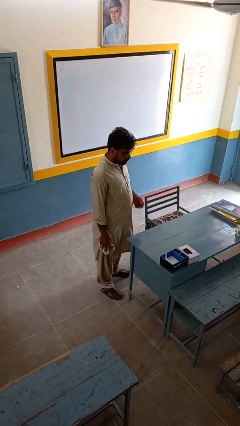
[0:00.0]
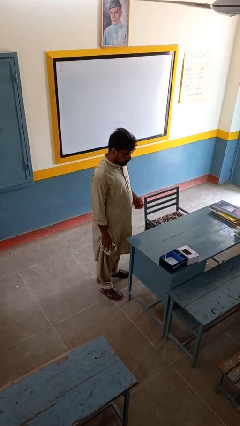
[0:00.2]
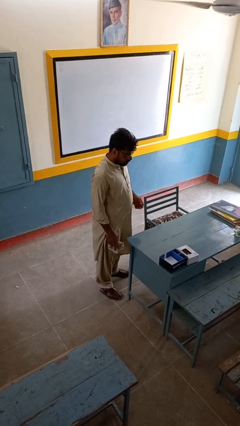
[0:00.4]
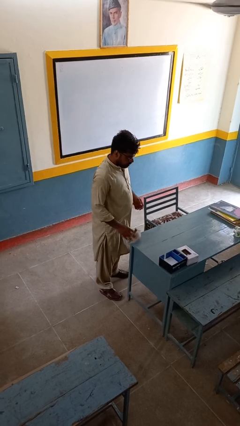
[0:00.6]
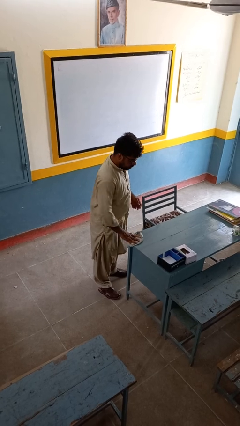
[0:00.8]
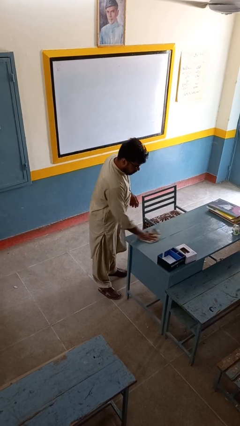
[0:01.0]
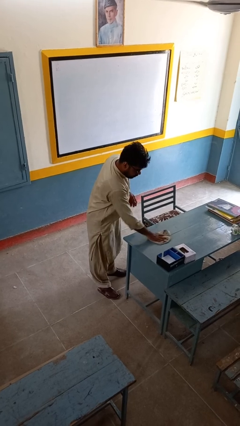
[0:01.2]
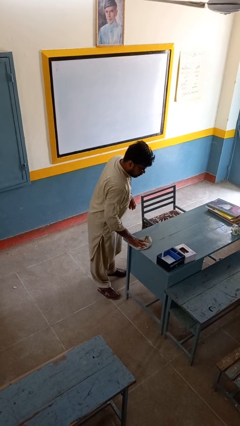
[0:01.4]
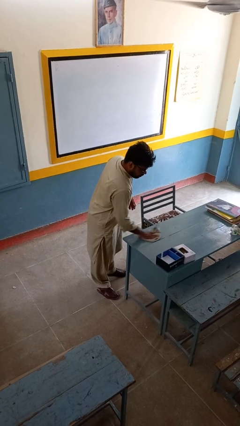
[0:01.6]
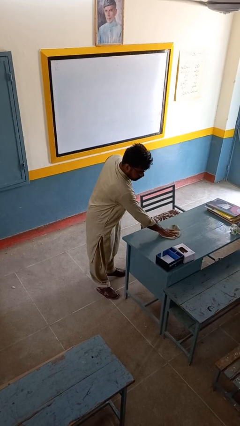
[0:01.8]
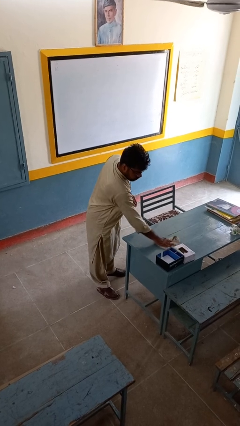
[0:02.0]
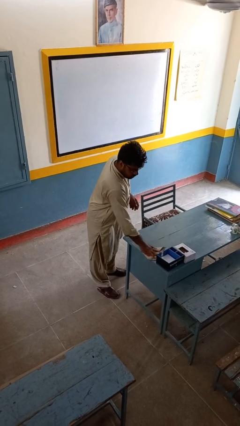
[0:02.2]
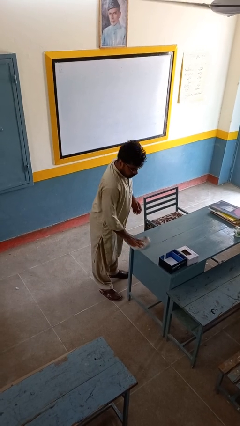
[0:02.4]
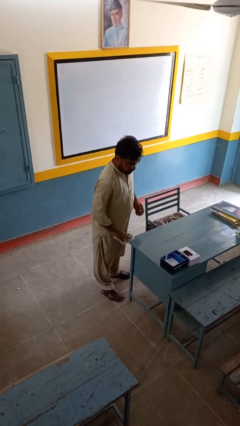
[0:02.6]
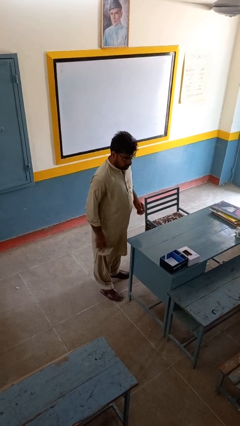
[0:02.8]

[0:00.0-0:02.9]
person cleans table with rag

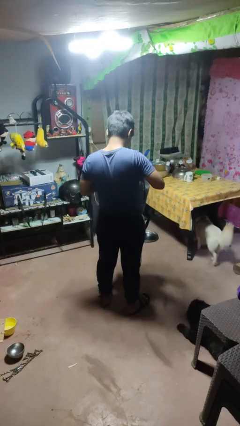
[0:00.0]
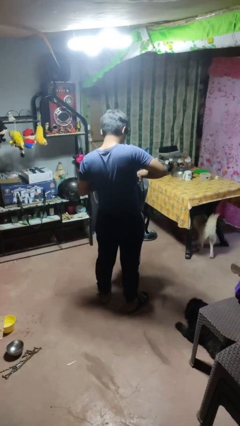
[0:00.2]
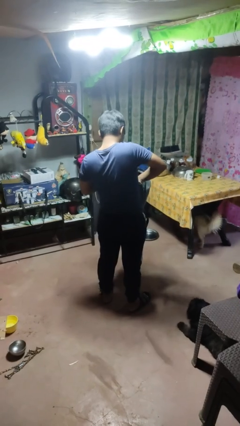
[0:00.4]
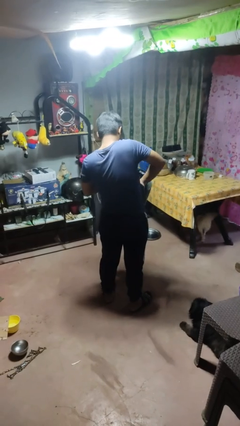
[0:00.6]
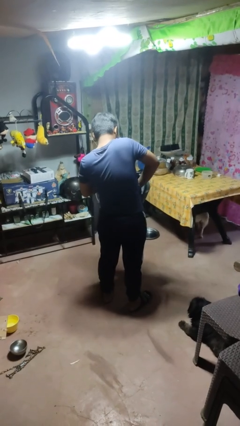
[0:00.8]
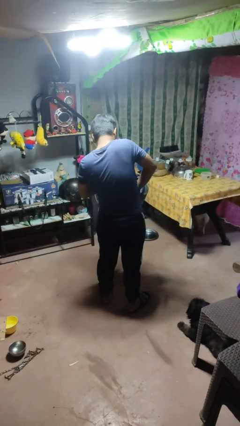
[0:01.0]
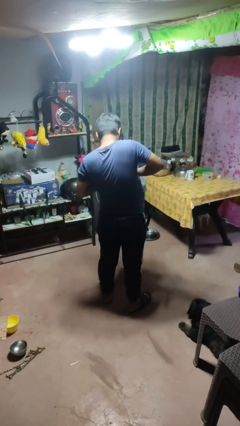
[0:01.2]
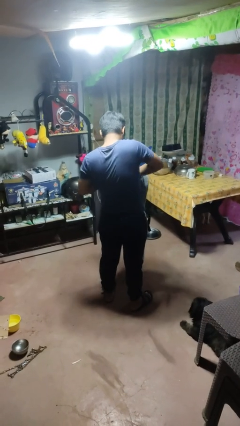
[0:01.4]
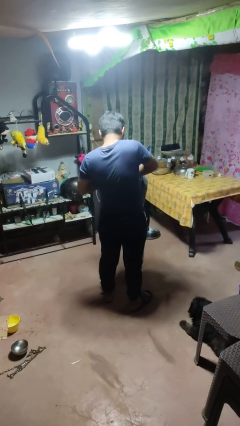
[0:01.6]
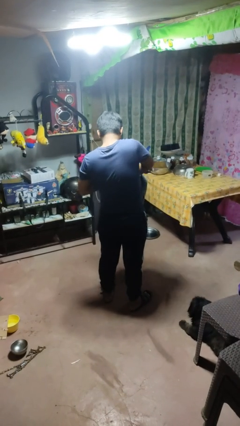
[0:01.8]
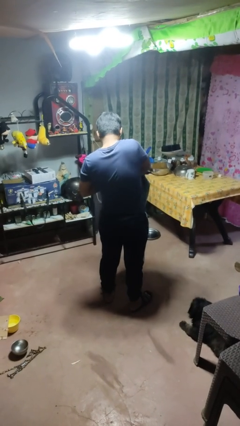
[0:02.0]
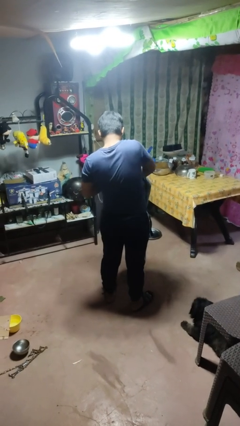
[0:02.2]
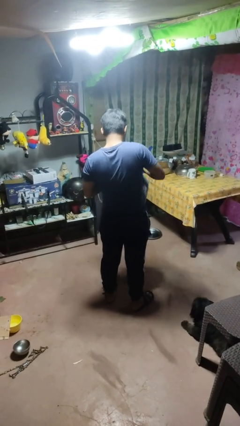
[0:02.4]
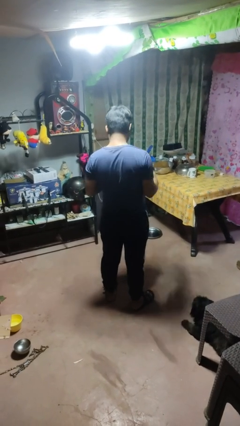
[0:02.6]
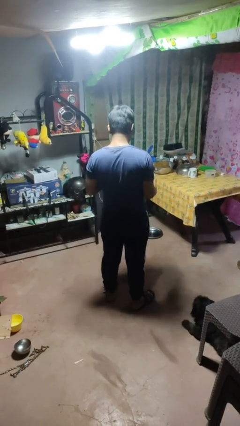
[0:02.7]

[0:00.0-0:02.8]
person searches in bag

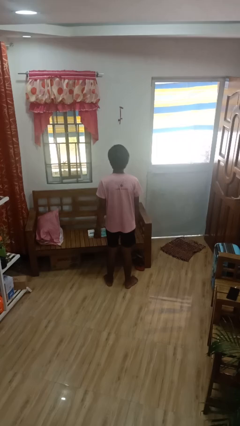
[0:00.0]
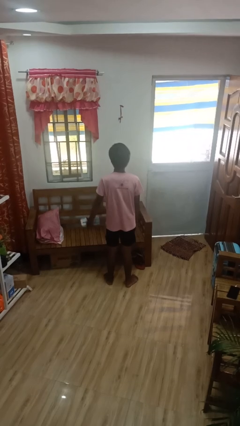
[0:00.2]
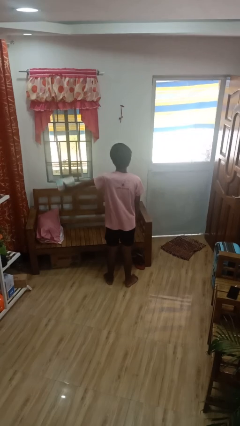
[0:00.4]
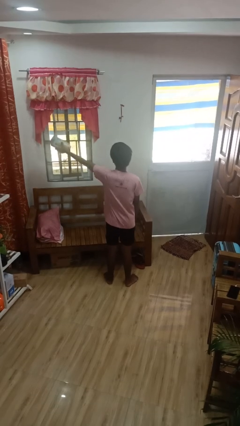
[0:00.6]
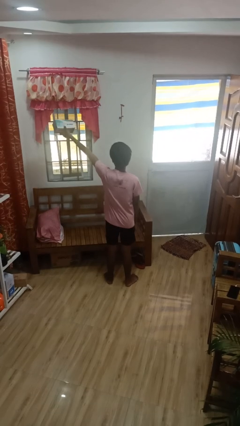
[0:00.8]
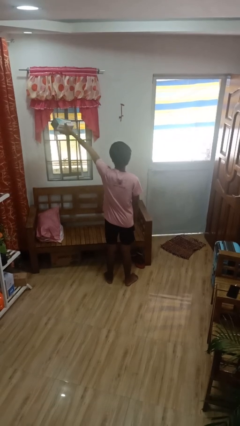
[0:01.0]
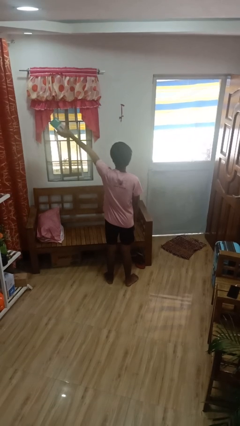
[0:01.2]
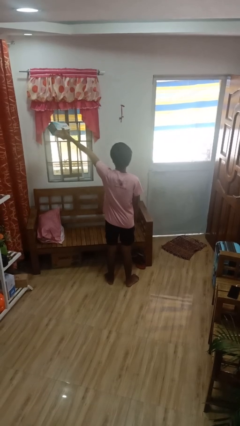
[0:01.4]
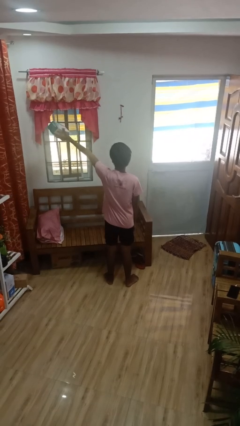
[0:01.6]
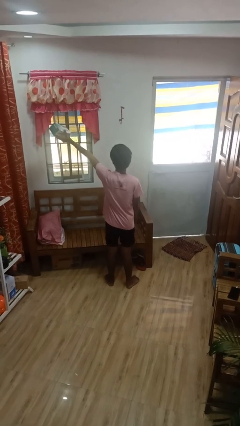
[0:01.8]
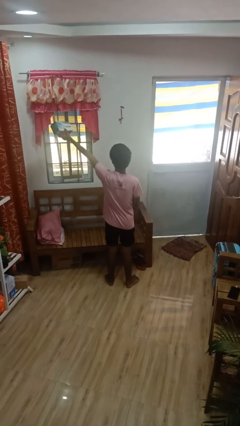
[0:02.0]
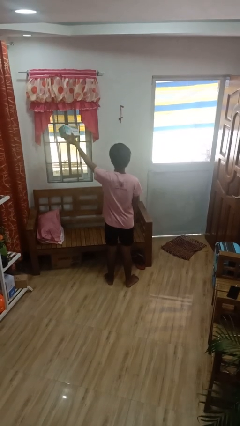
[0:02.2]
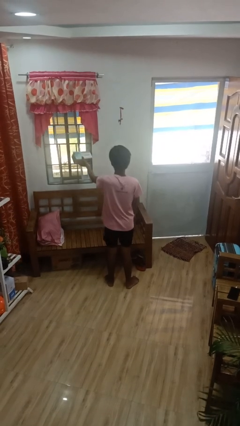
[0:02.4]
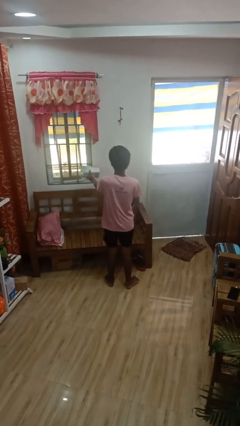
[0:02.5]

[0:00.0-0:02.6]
person holds object above head

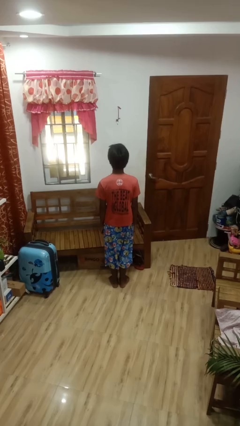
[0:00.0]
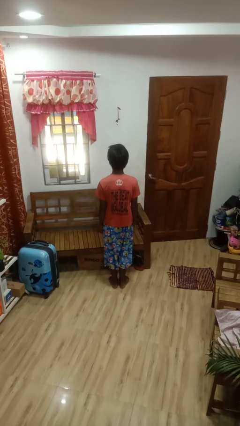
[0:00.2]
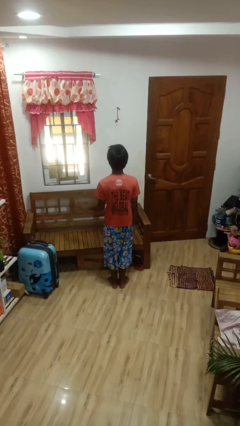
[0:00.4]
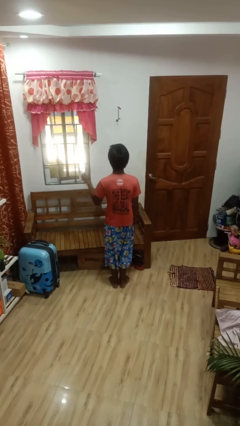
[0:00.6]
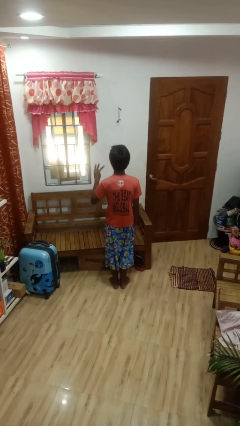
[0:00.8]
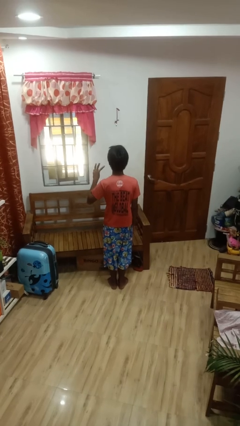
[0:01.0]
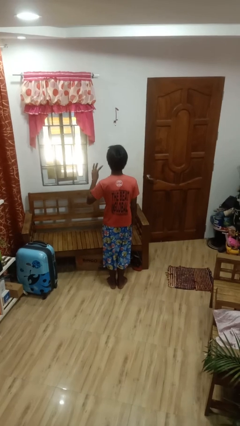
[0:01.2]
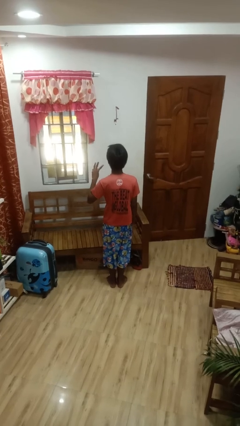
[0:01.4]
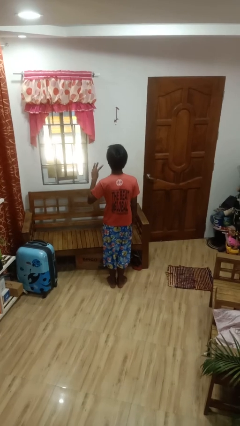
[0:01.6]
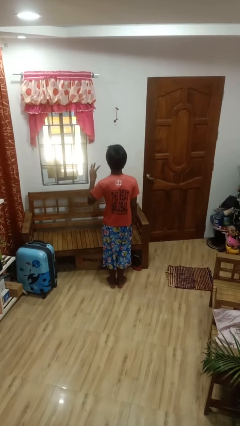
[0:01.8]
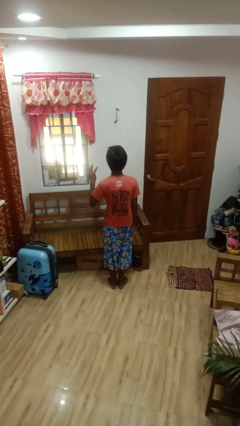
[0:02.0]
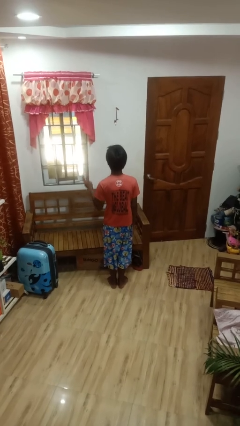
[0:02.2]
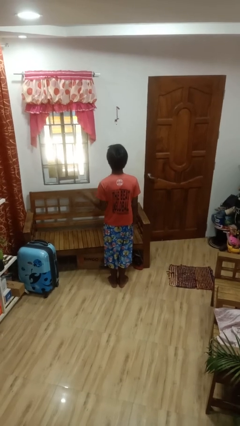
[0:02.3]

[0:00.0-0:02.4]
person gestures number three

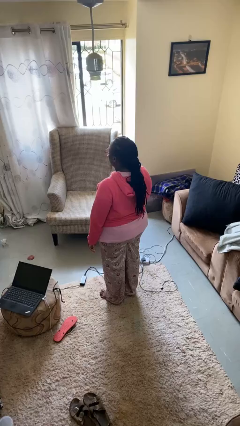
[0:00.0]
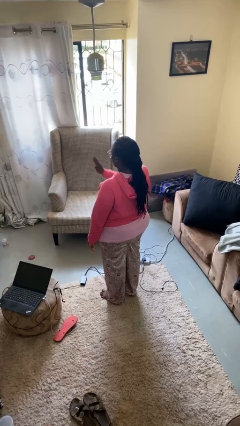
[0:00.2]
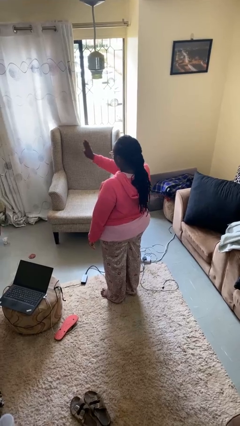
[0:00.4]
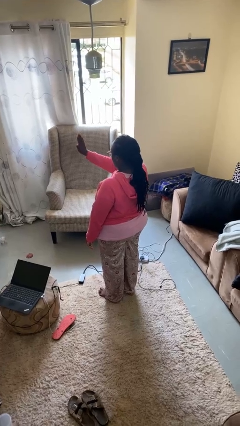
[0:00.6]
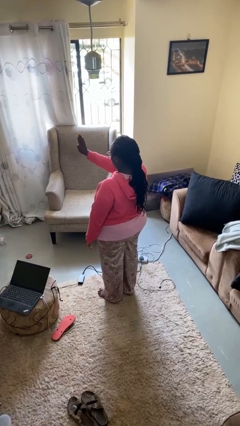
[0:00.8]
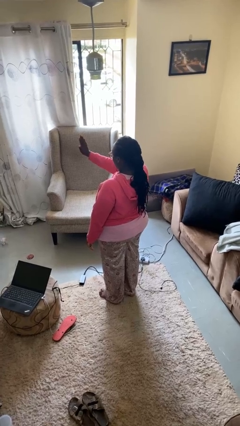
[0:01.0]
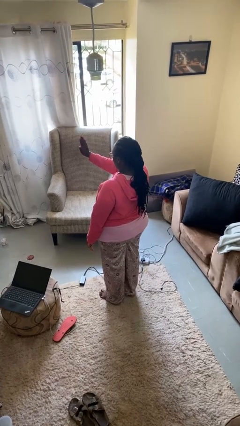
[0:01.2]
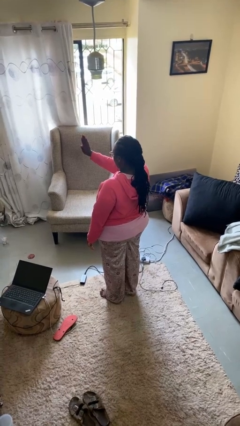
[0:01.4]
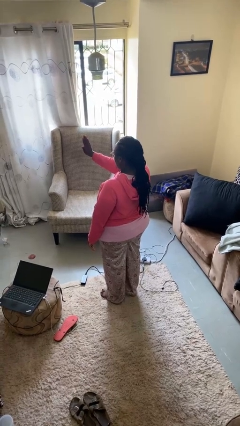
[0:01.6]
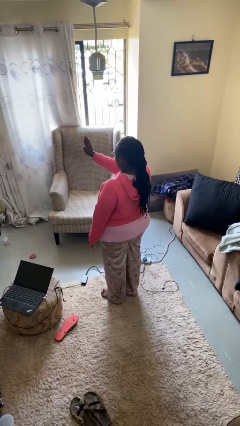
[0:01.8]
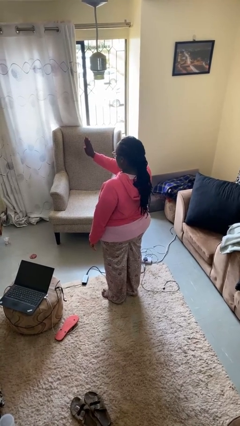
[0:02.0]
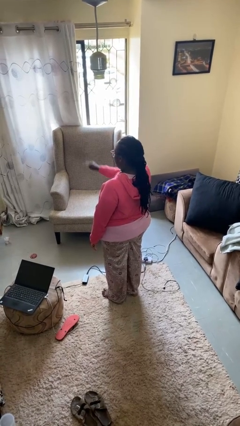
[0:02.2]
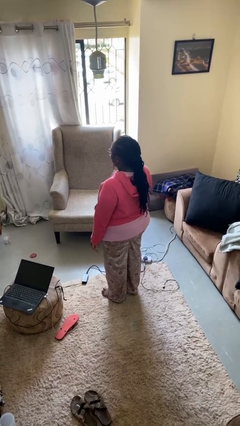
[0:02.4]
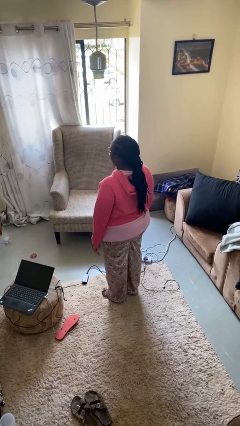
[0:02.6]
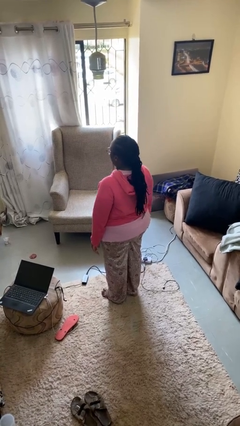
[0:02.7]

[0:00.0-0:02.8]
person gestures stop

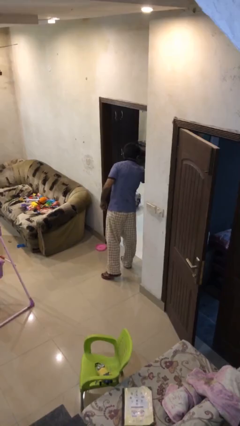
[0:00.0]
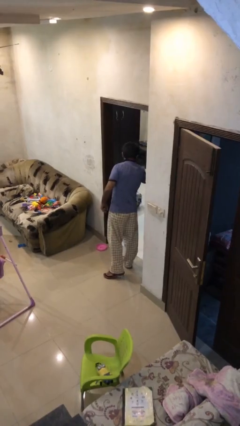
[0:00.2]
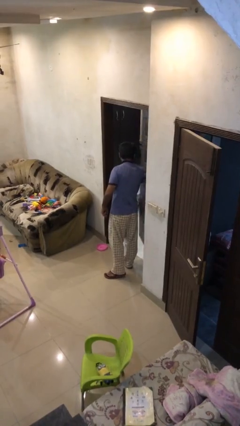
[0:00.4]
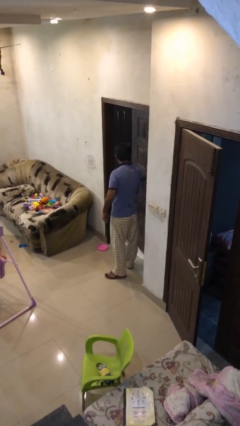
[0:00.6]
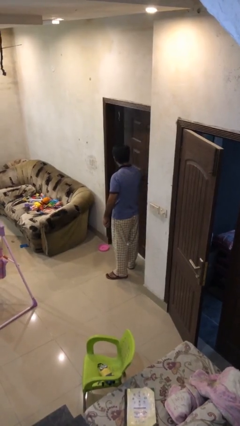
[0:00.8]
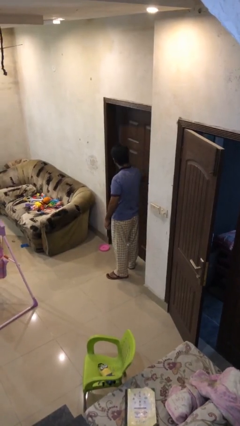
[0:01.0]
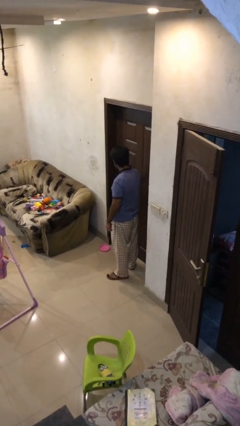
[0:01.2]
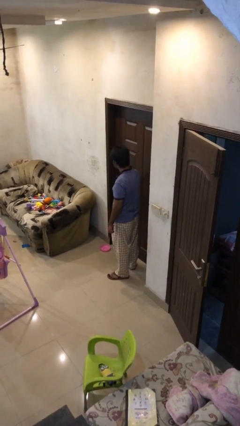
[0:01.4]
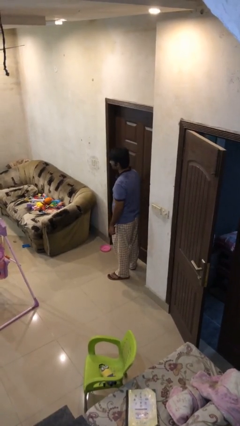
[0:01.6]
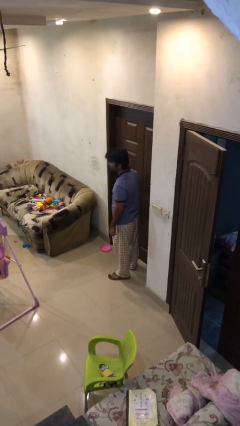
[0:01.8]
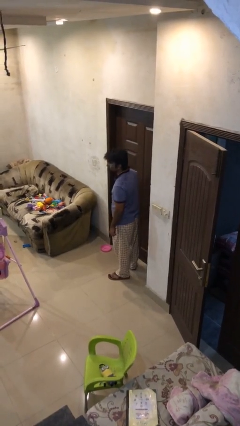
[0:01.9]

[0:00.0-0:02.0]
person closes facility door

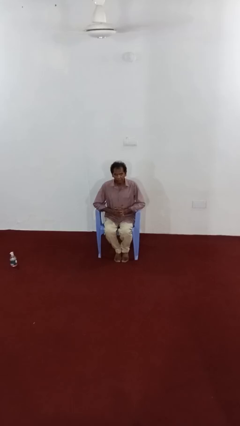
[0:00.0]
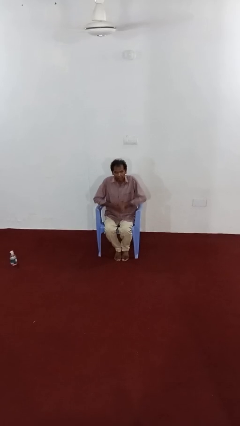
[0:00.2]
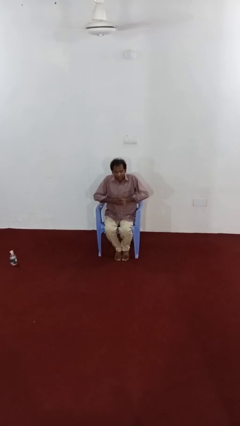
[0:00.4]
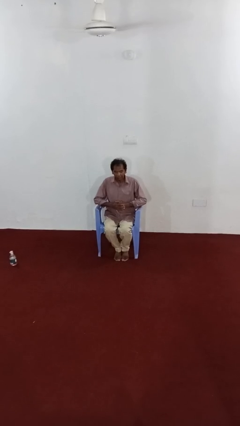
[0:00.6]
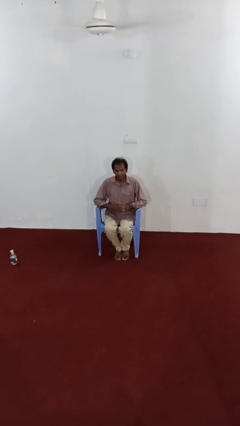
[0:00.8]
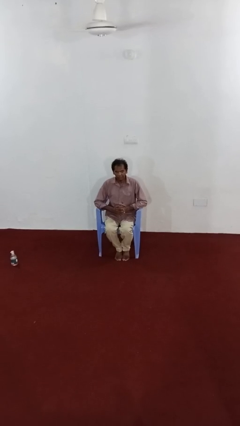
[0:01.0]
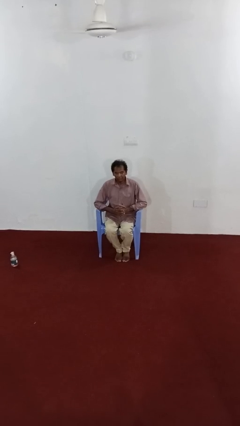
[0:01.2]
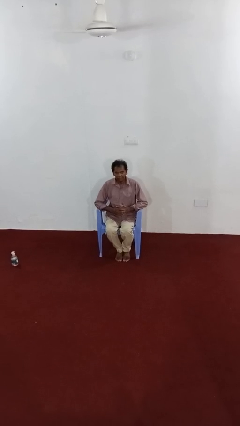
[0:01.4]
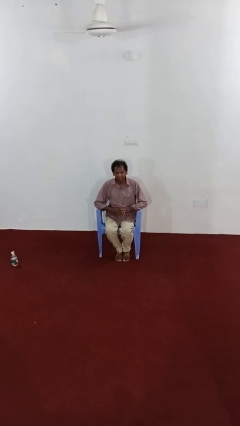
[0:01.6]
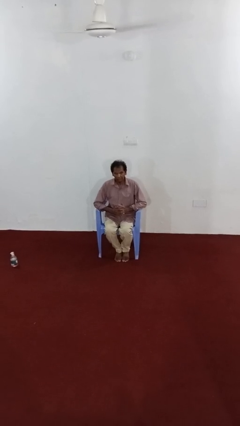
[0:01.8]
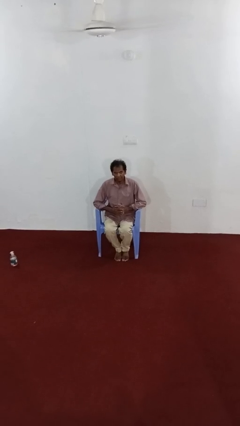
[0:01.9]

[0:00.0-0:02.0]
person shrugs
